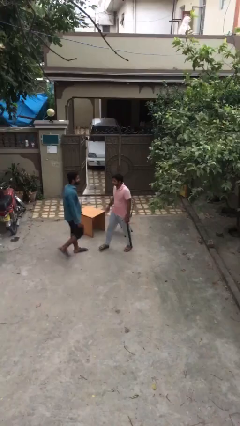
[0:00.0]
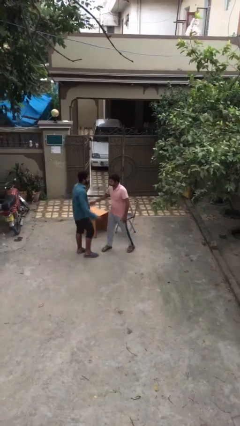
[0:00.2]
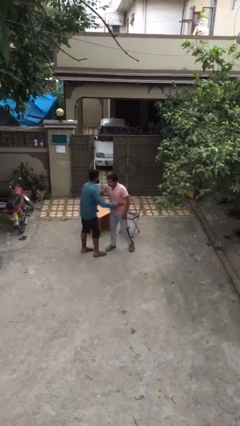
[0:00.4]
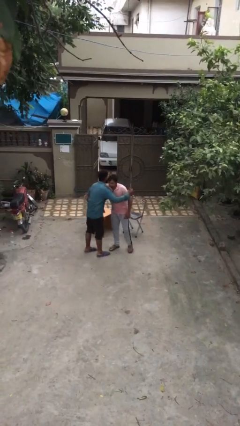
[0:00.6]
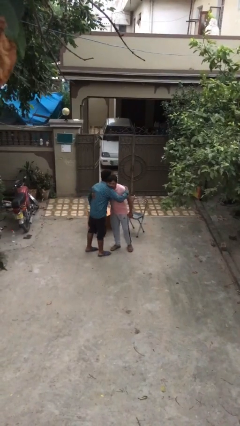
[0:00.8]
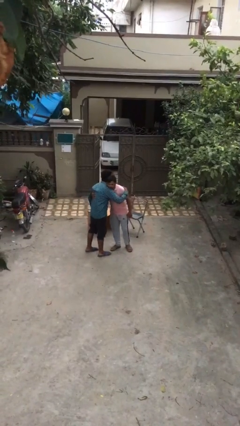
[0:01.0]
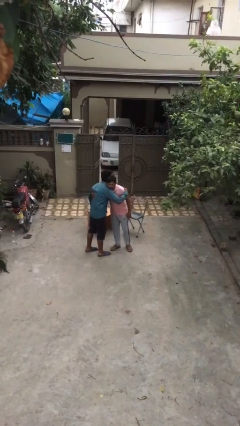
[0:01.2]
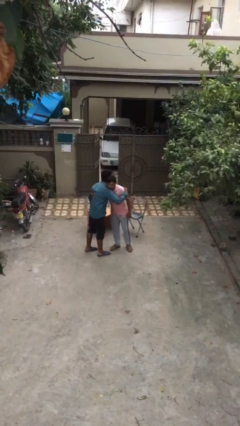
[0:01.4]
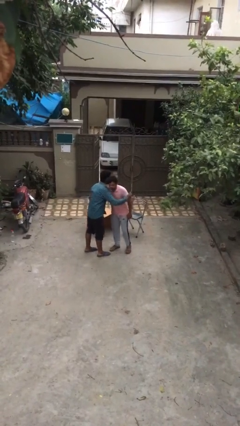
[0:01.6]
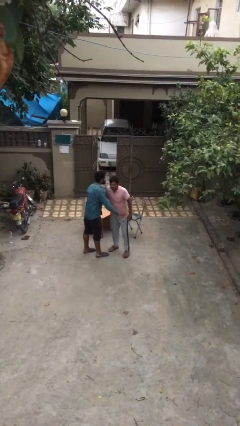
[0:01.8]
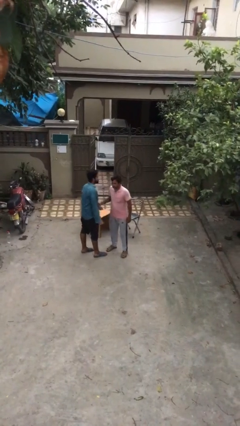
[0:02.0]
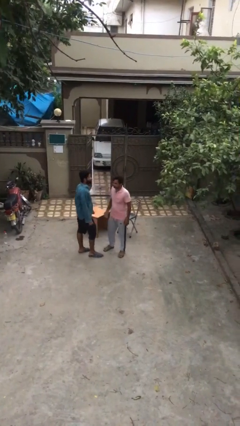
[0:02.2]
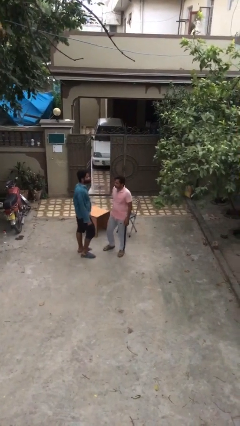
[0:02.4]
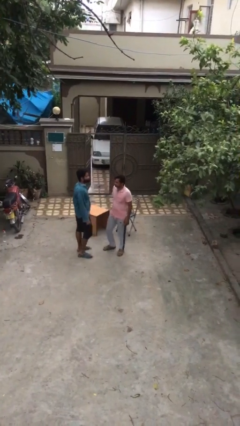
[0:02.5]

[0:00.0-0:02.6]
person embraces person

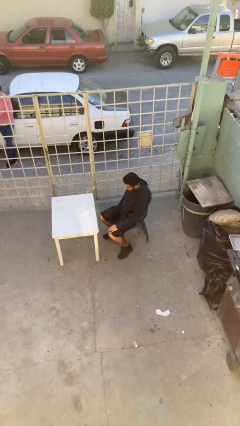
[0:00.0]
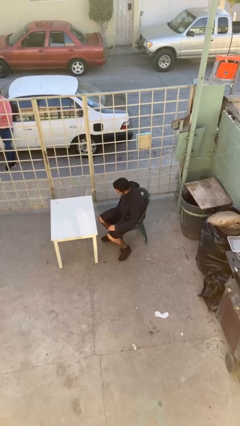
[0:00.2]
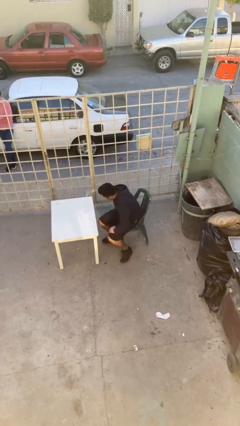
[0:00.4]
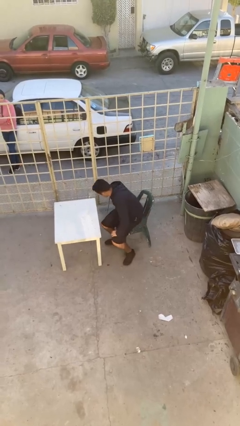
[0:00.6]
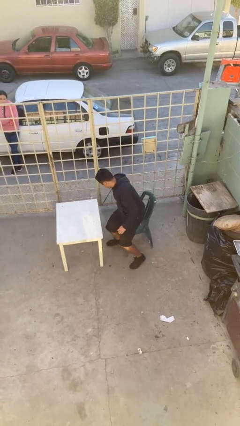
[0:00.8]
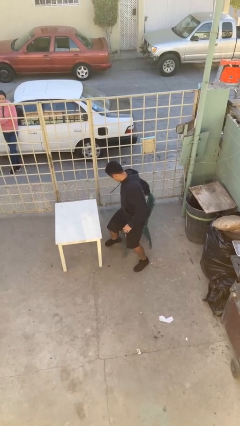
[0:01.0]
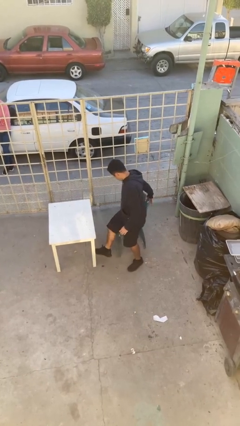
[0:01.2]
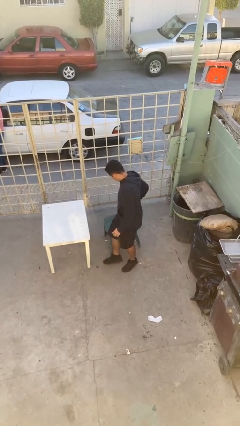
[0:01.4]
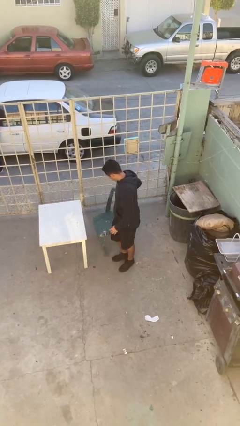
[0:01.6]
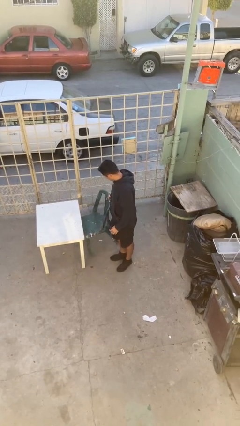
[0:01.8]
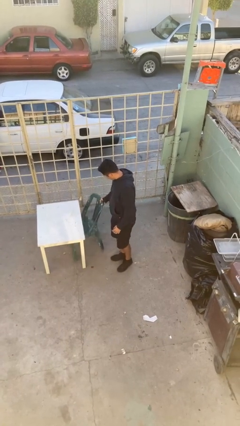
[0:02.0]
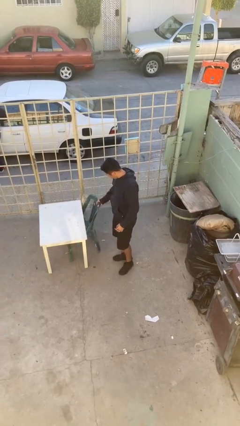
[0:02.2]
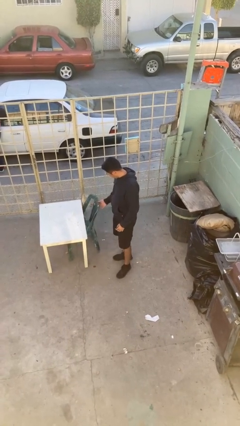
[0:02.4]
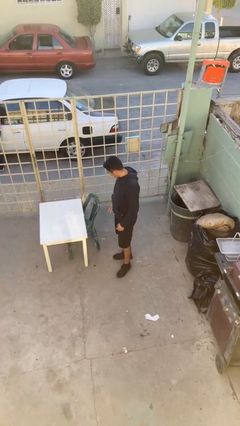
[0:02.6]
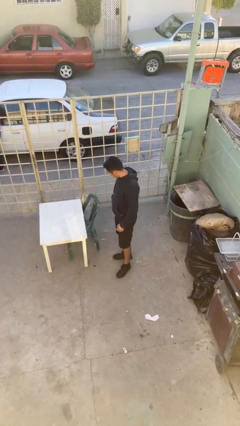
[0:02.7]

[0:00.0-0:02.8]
person stands up

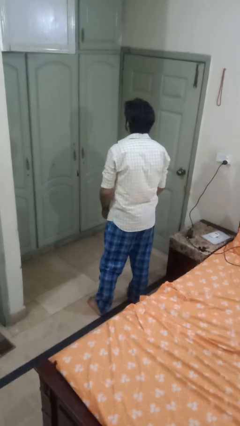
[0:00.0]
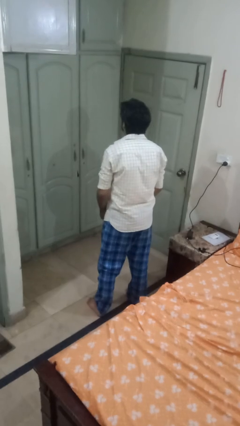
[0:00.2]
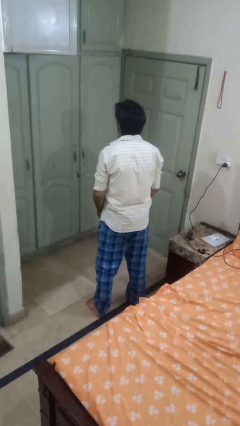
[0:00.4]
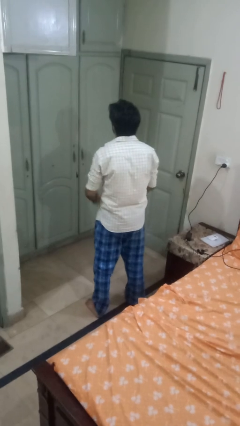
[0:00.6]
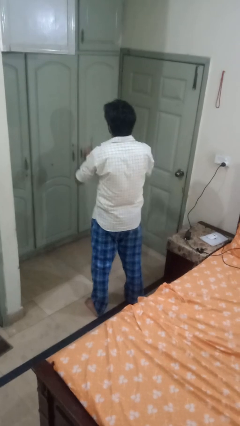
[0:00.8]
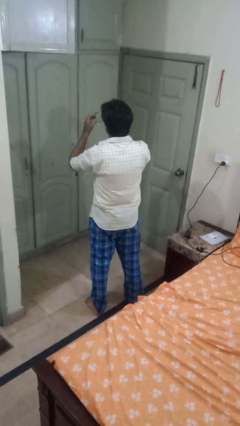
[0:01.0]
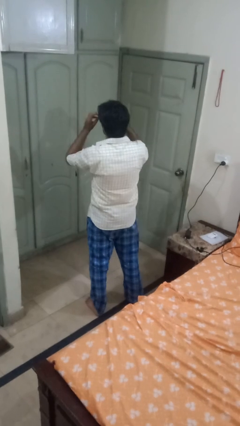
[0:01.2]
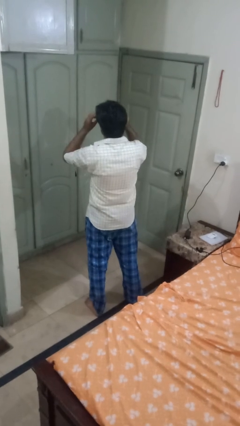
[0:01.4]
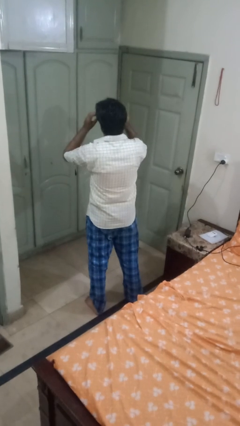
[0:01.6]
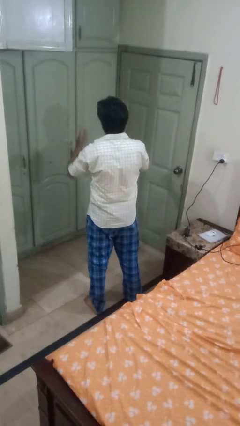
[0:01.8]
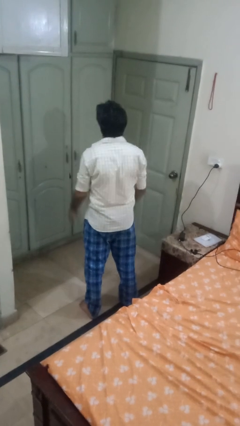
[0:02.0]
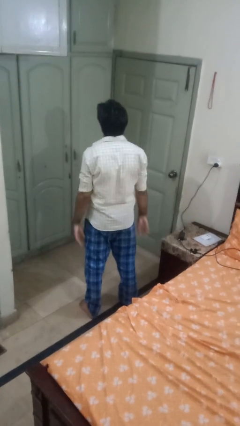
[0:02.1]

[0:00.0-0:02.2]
person puts on glasses

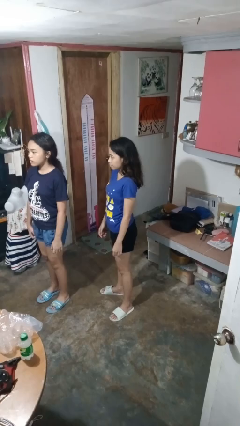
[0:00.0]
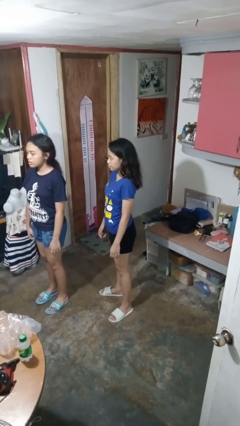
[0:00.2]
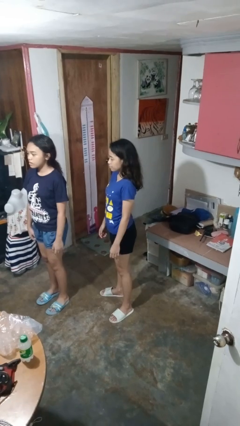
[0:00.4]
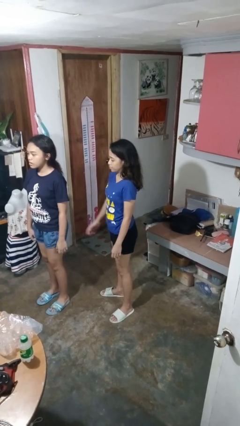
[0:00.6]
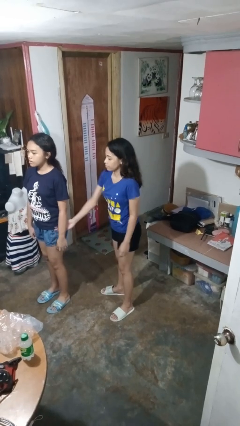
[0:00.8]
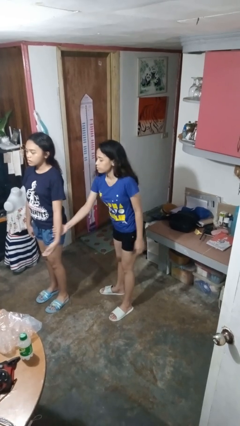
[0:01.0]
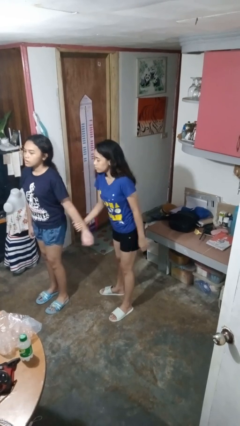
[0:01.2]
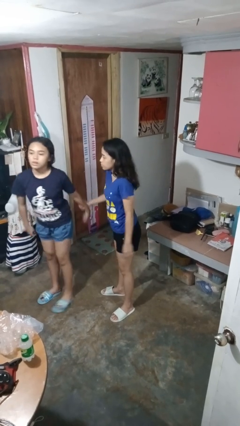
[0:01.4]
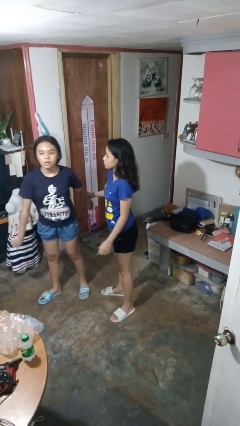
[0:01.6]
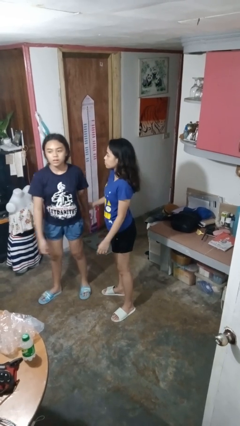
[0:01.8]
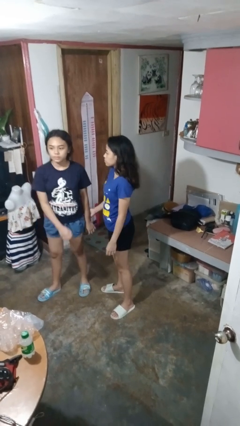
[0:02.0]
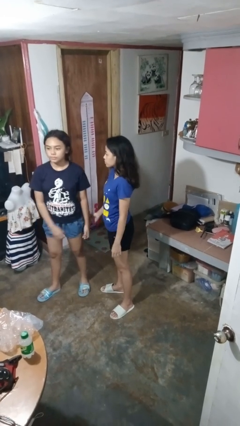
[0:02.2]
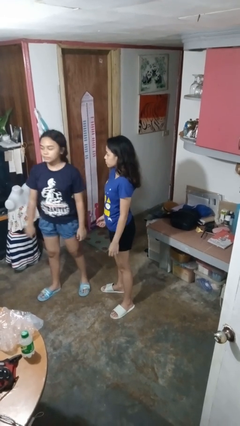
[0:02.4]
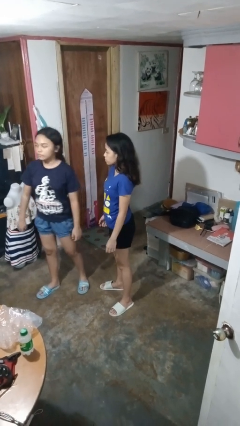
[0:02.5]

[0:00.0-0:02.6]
person grabs person by forearm

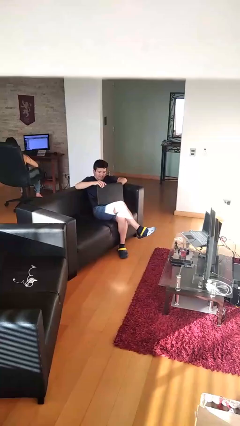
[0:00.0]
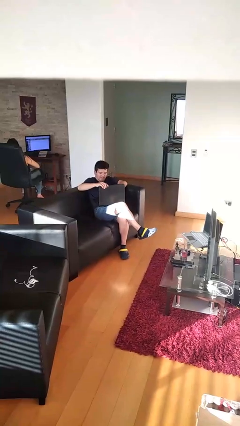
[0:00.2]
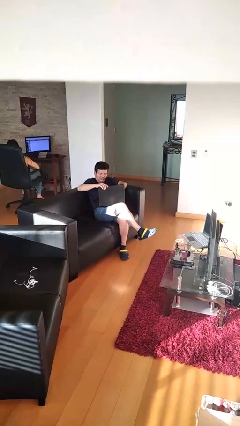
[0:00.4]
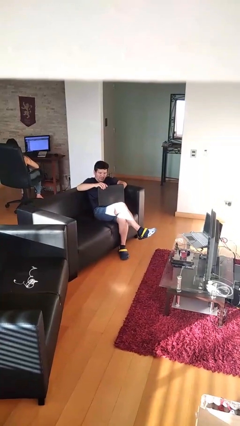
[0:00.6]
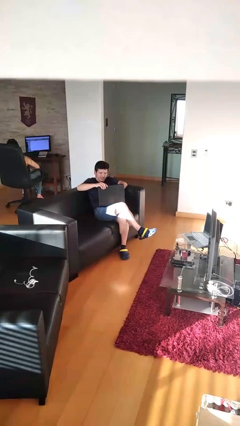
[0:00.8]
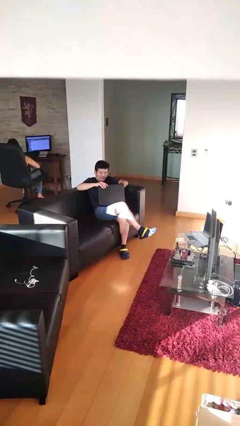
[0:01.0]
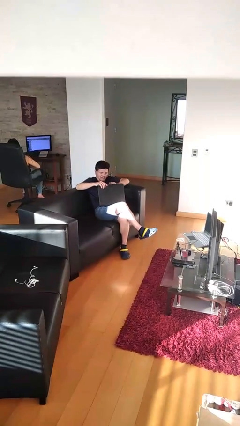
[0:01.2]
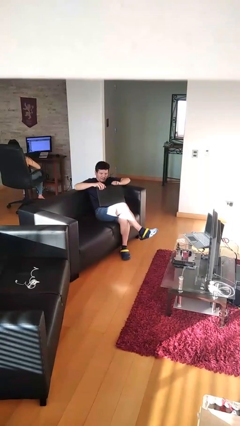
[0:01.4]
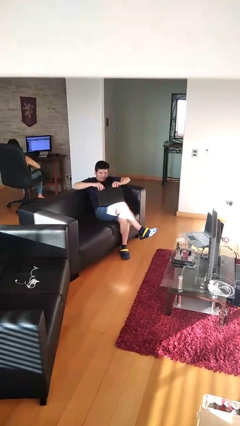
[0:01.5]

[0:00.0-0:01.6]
person interacts with laptop

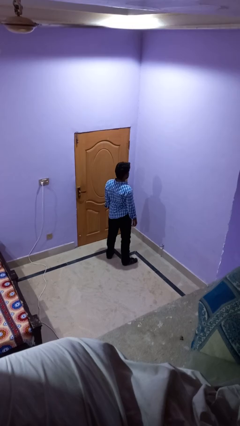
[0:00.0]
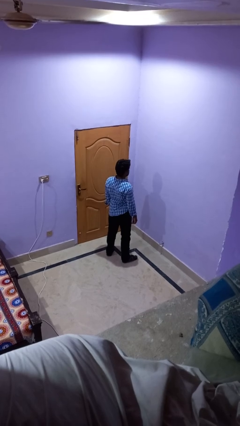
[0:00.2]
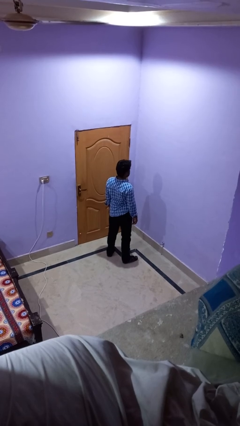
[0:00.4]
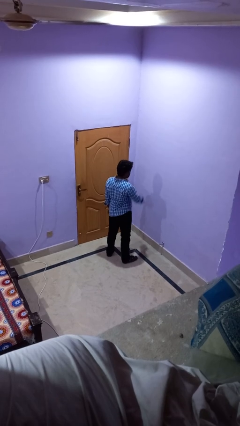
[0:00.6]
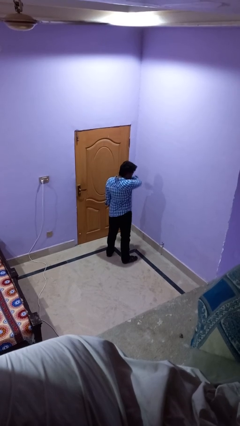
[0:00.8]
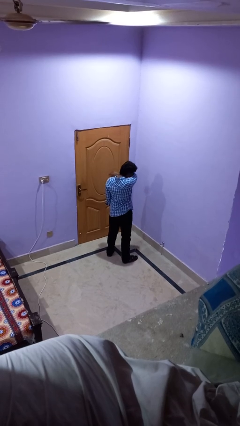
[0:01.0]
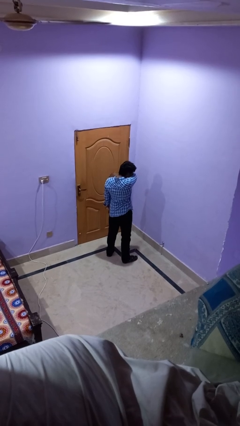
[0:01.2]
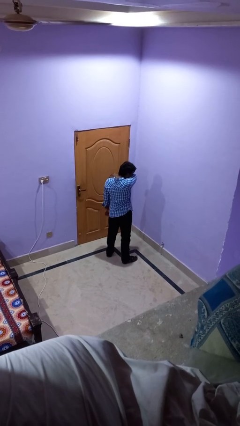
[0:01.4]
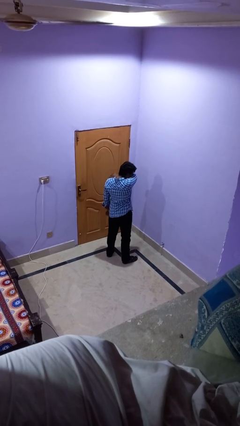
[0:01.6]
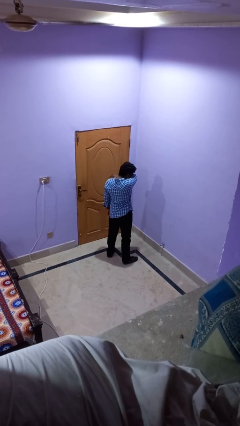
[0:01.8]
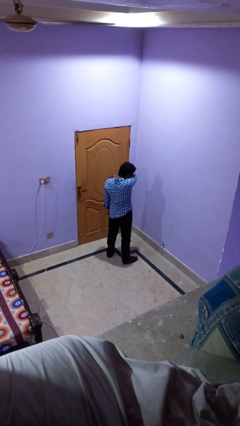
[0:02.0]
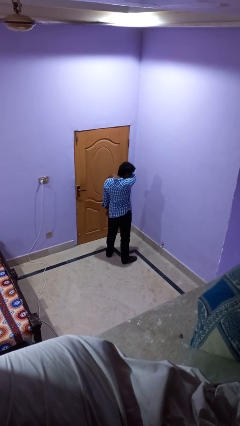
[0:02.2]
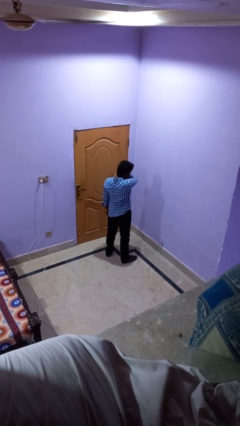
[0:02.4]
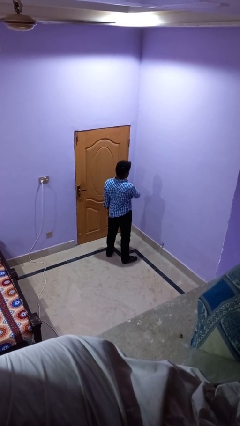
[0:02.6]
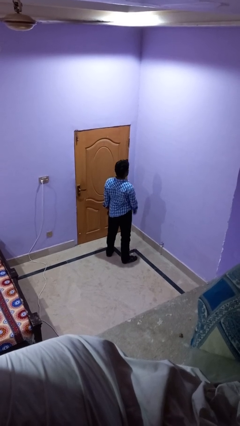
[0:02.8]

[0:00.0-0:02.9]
person sneezes into arm

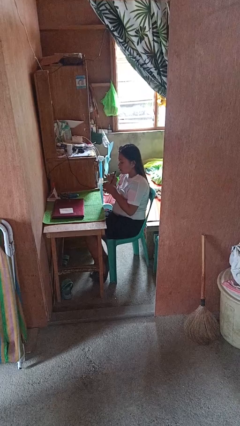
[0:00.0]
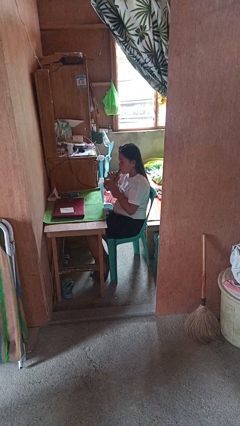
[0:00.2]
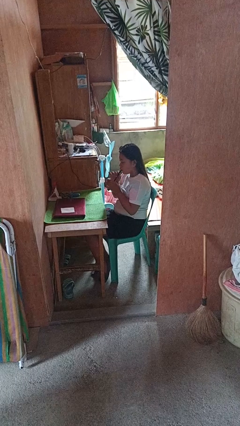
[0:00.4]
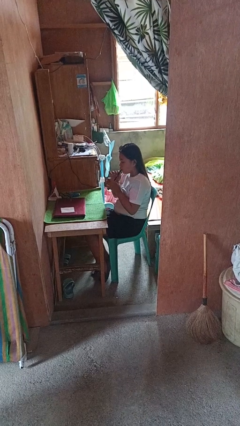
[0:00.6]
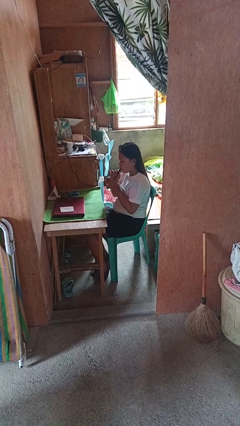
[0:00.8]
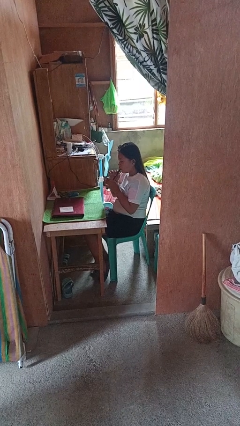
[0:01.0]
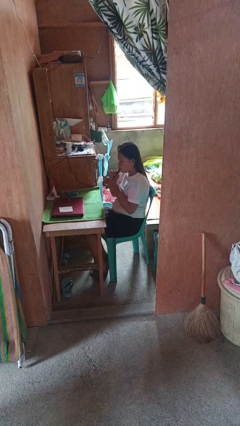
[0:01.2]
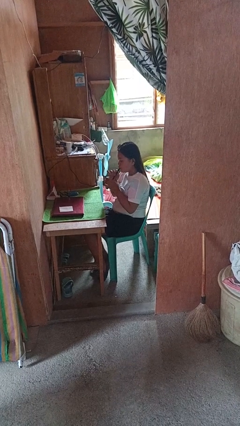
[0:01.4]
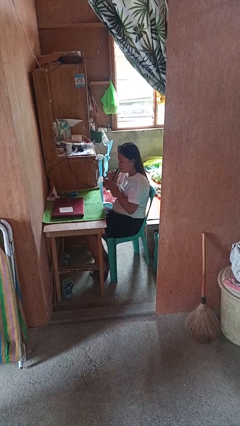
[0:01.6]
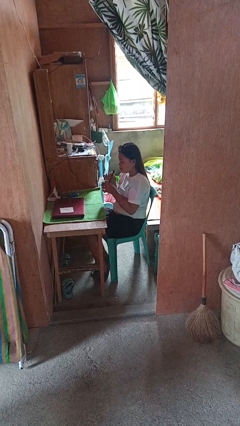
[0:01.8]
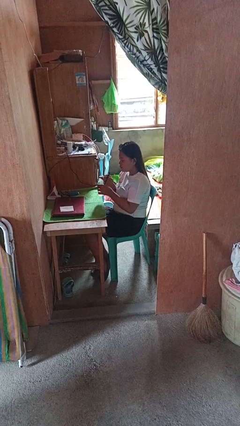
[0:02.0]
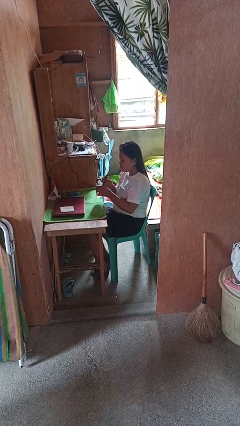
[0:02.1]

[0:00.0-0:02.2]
person drinks from straw

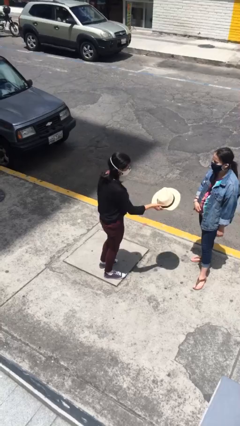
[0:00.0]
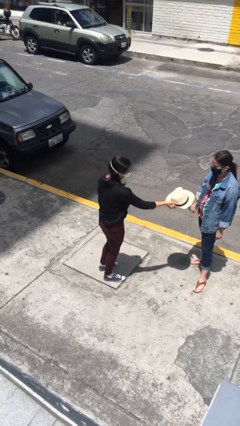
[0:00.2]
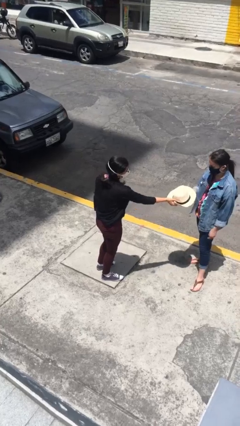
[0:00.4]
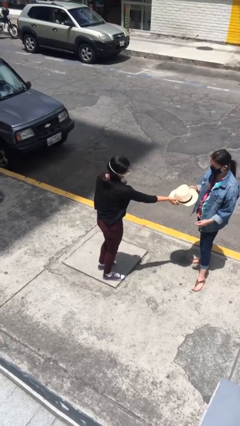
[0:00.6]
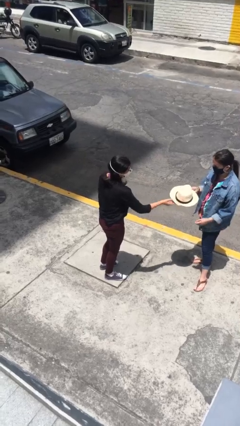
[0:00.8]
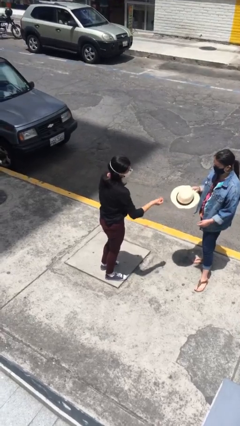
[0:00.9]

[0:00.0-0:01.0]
person transfers object to person
